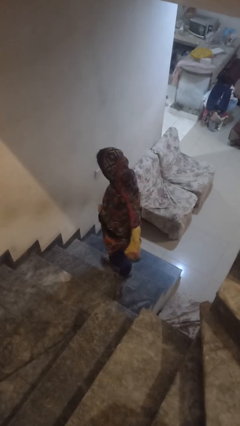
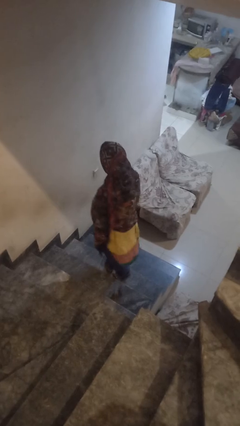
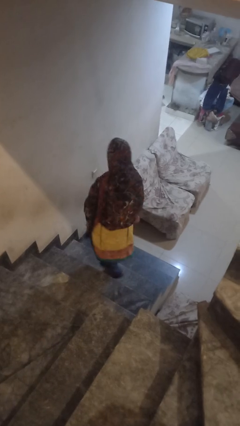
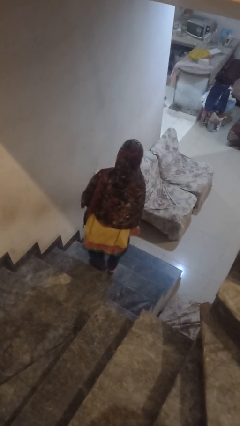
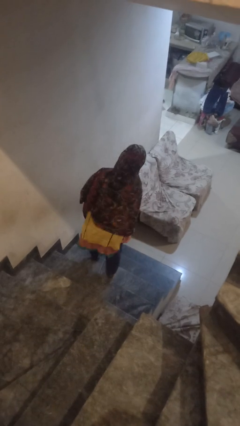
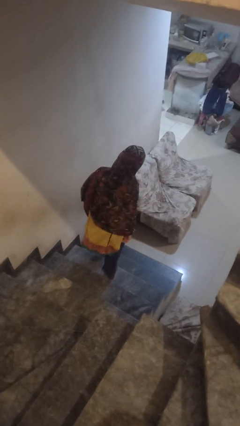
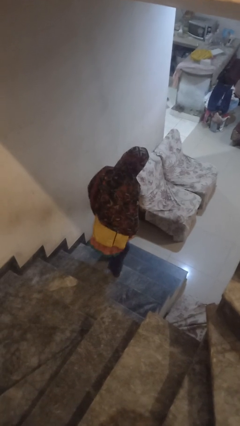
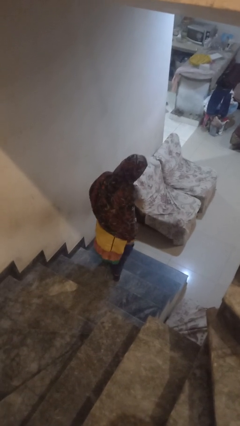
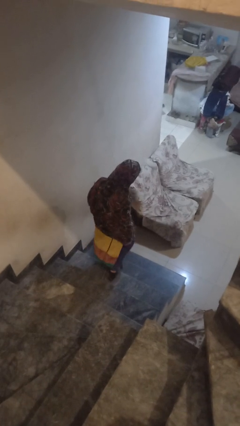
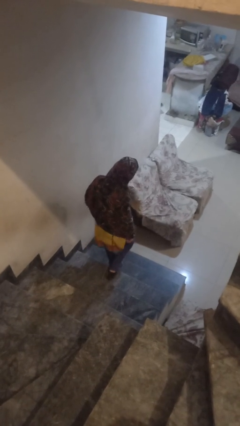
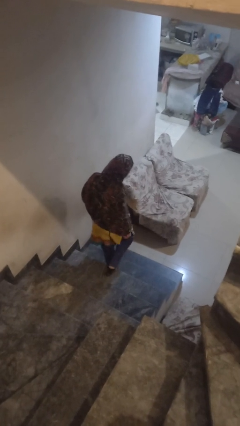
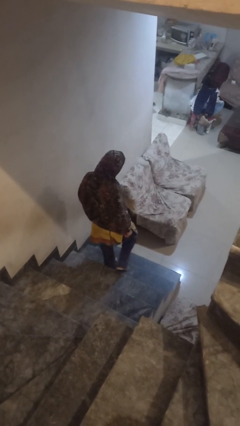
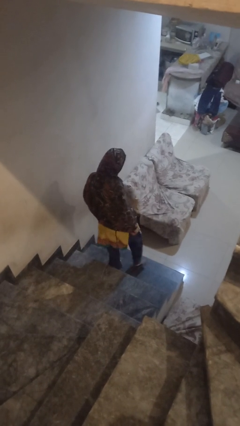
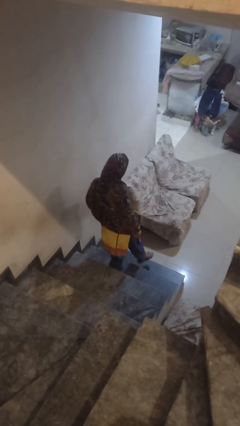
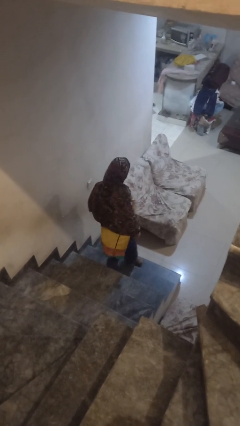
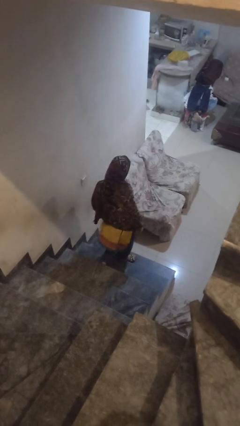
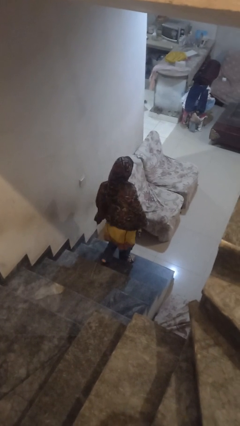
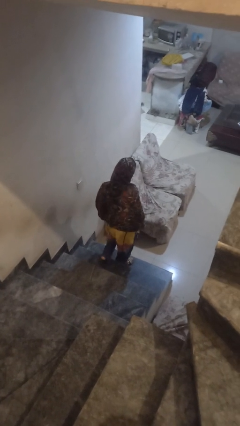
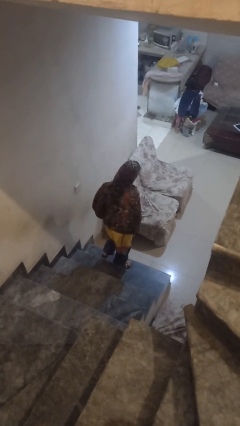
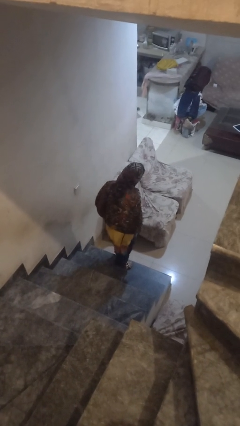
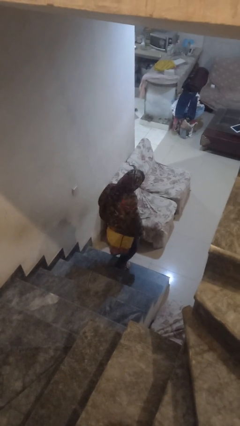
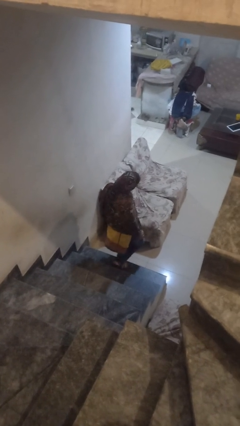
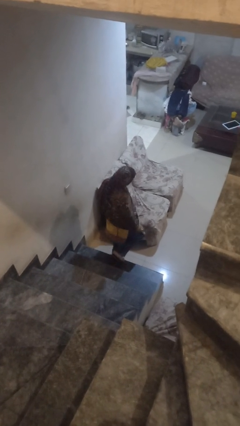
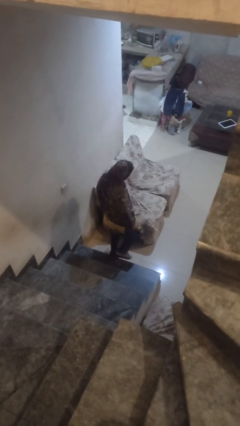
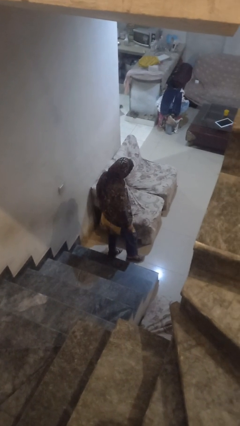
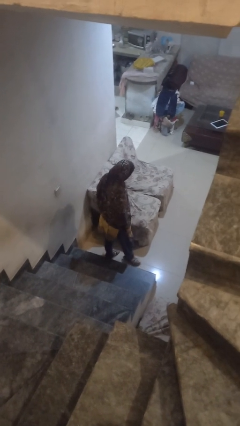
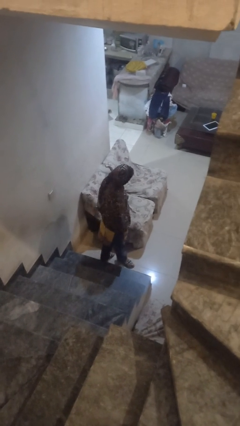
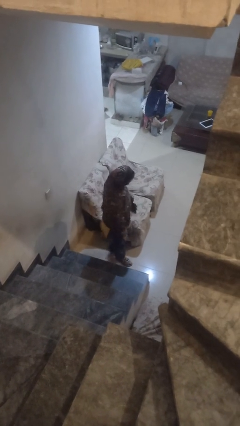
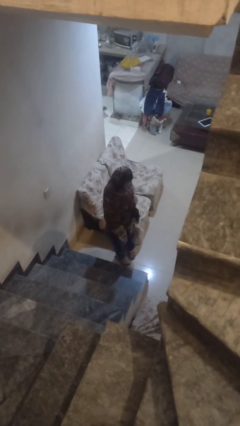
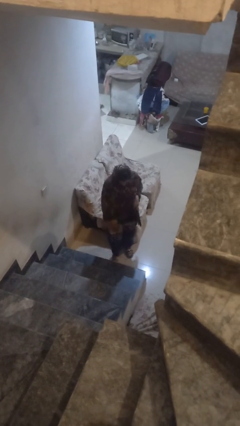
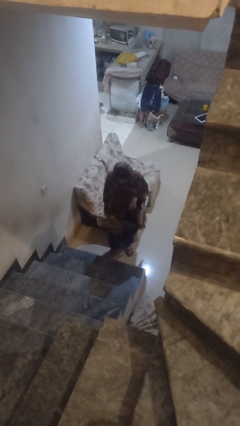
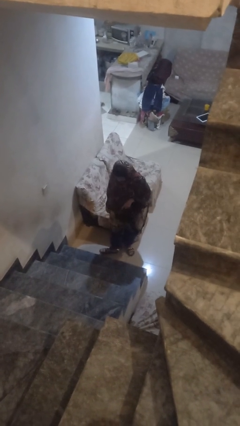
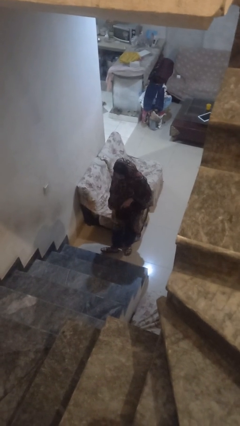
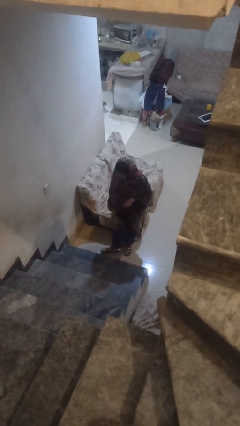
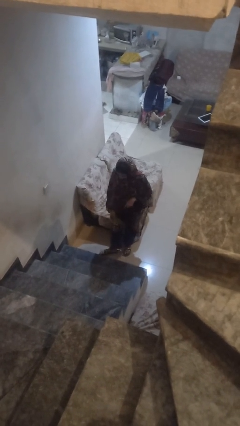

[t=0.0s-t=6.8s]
person climbs down stairs

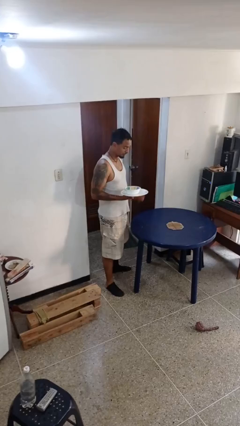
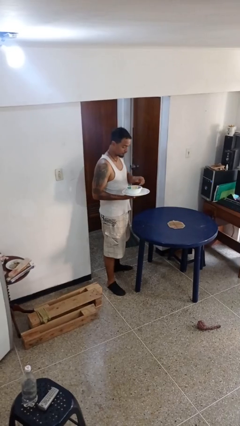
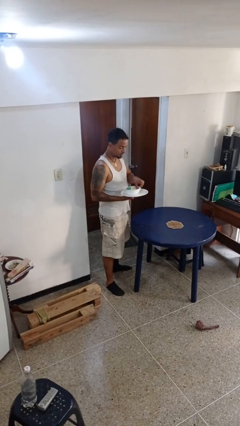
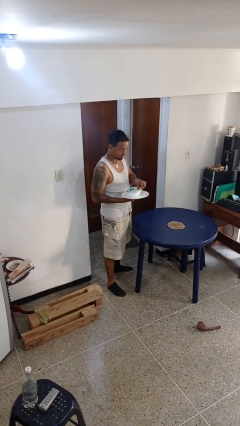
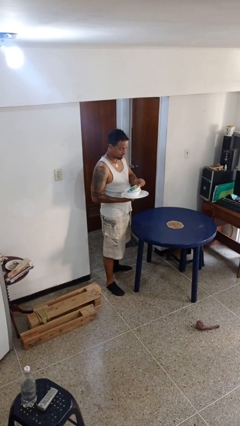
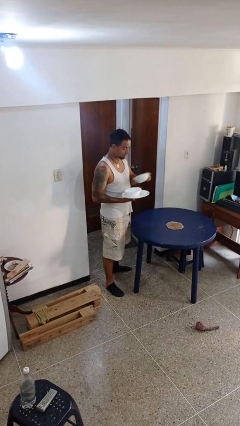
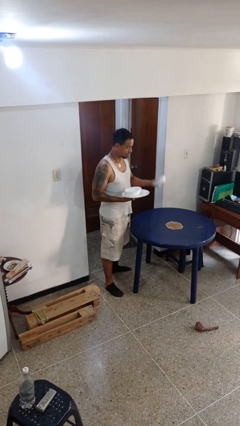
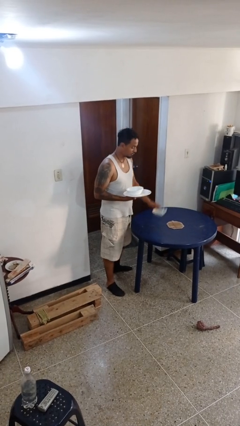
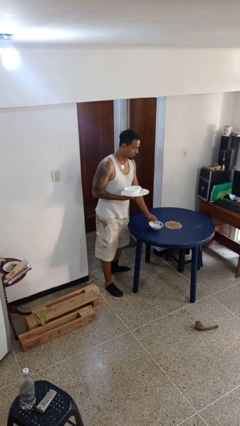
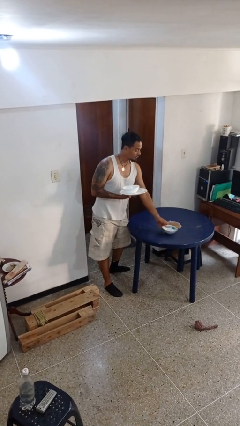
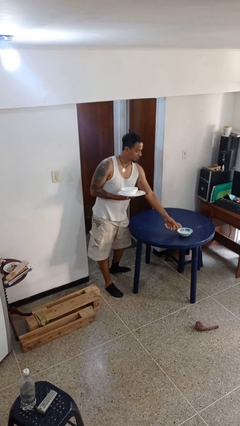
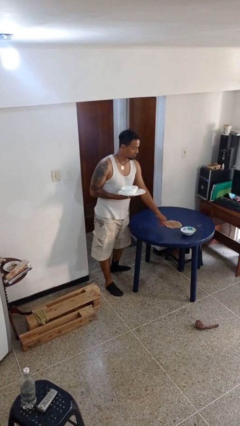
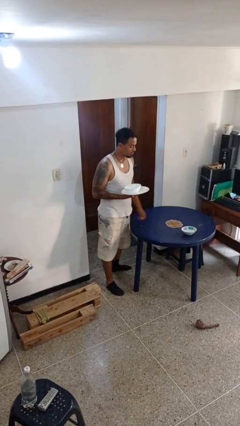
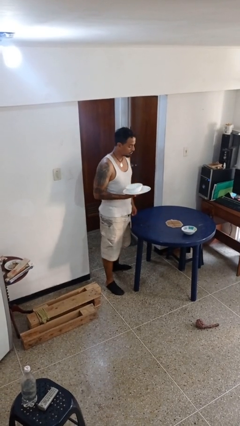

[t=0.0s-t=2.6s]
person sets table

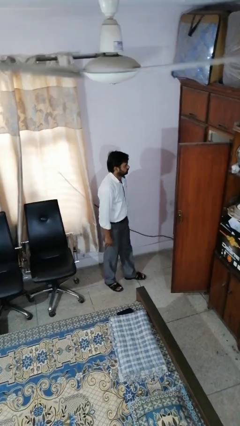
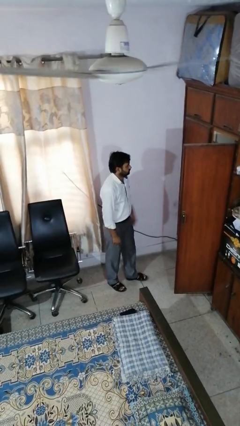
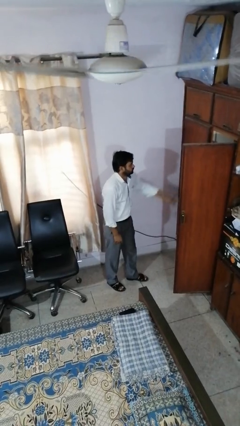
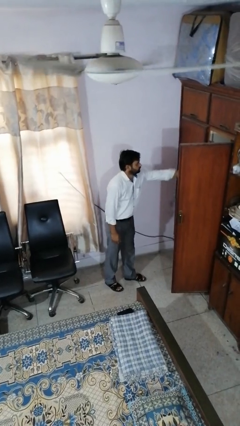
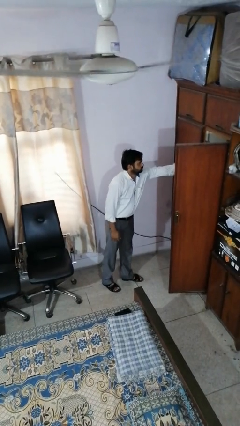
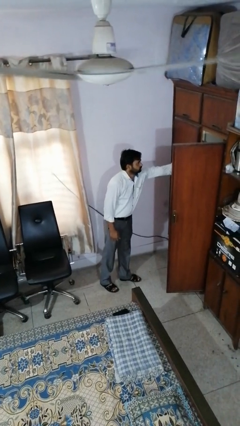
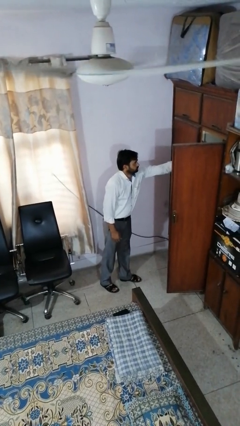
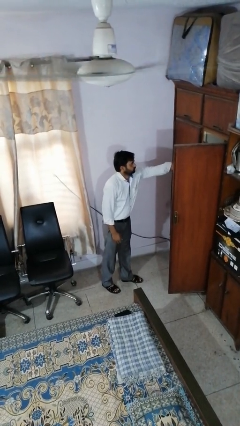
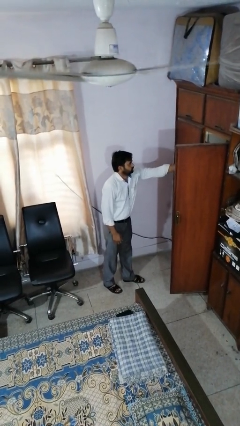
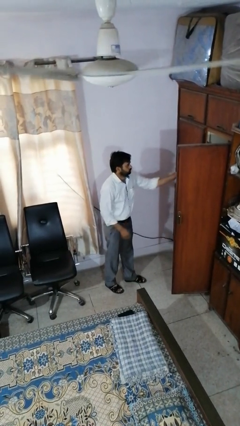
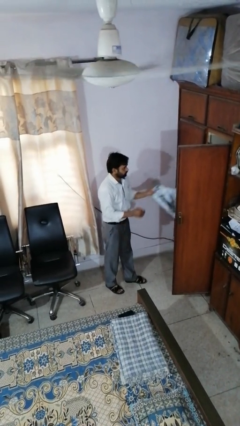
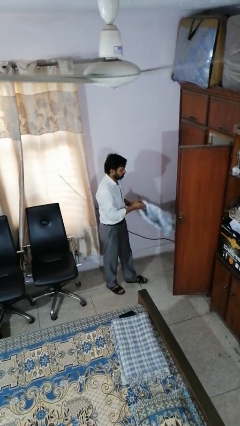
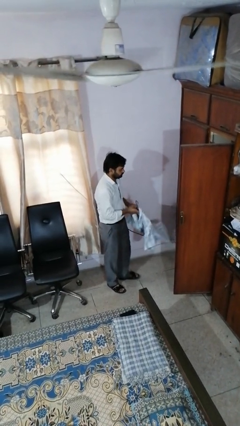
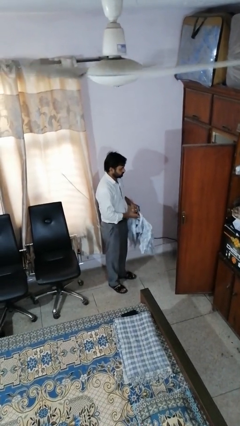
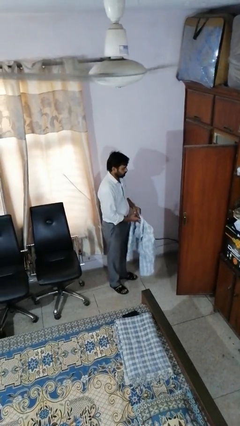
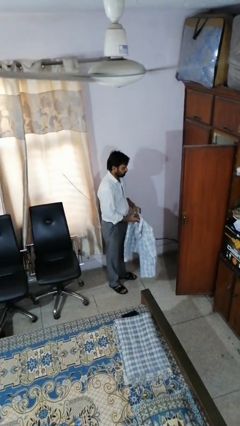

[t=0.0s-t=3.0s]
person takes clothes from closet

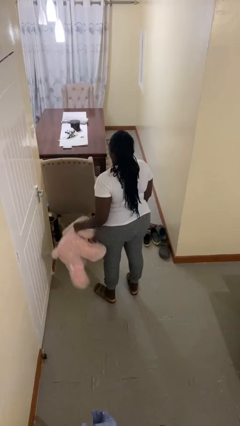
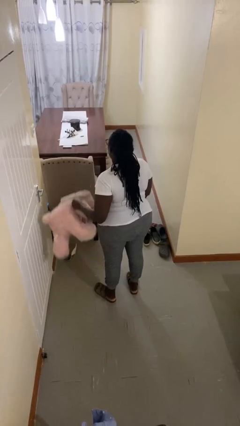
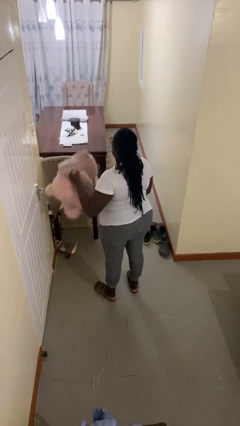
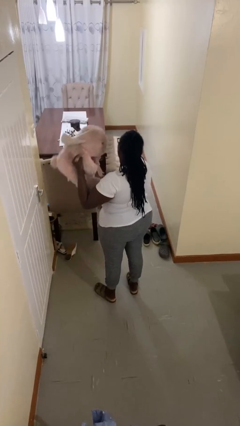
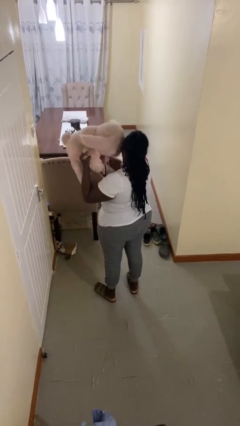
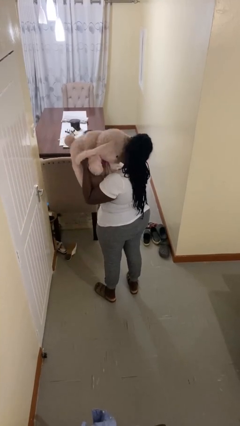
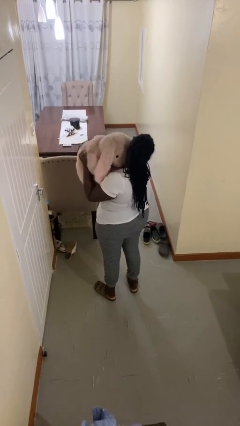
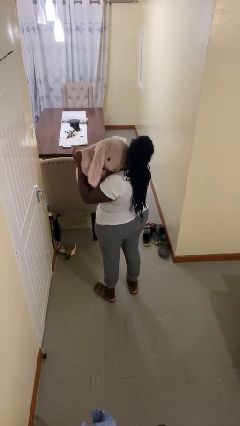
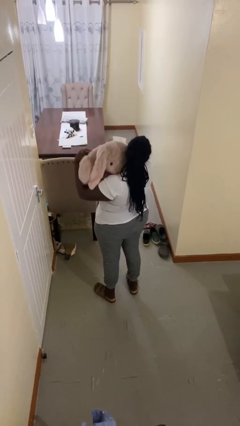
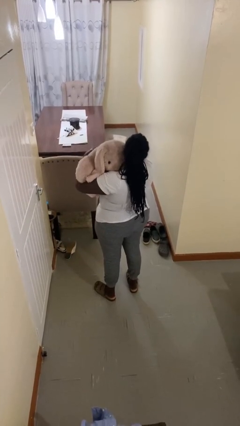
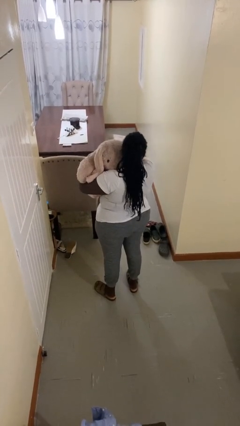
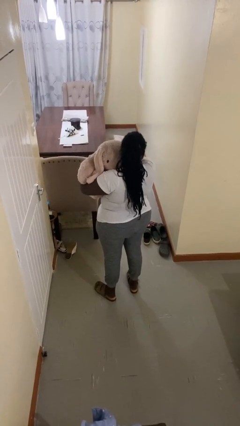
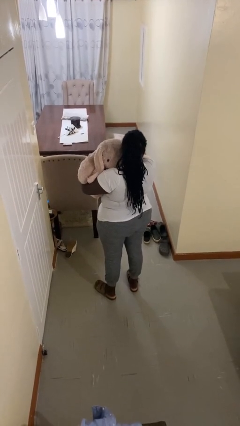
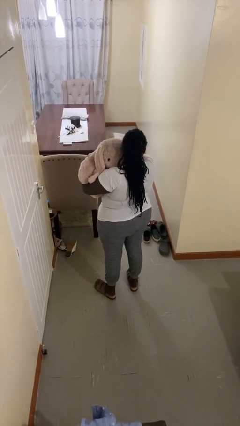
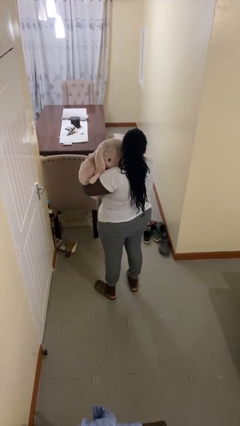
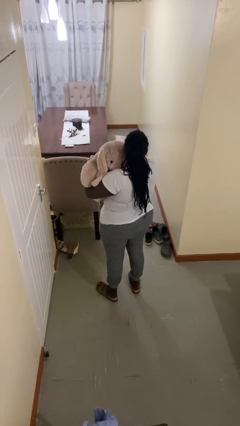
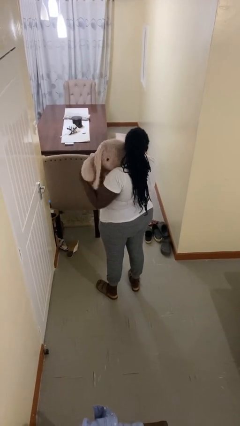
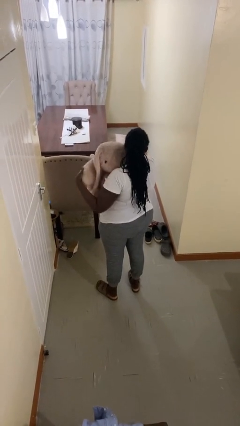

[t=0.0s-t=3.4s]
person hugs stuffed animal

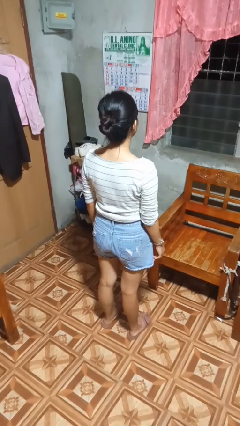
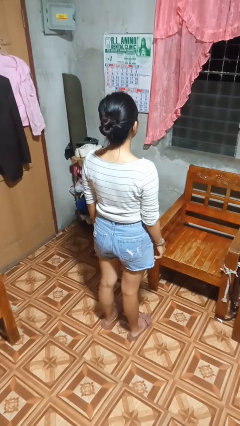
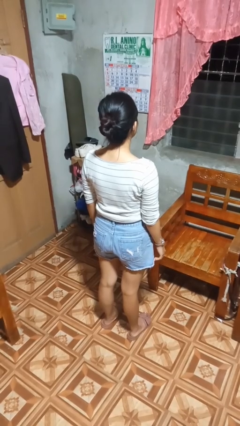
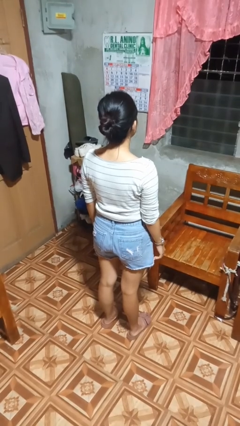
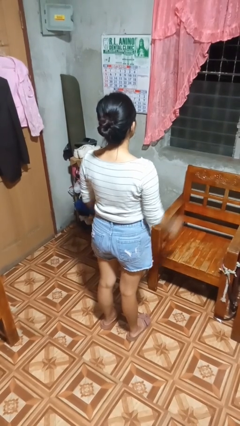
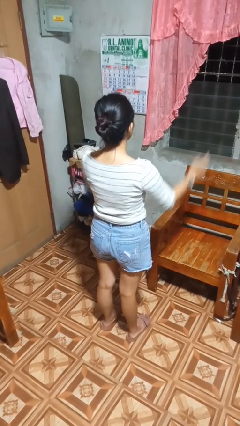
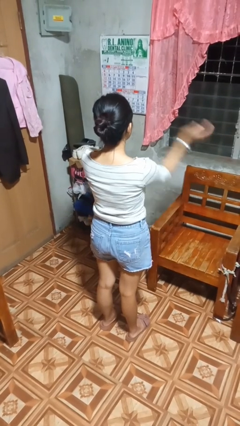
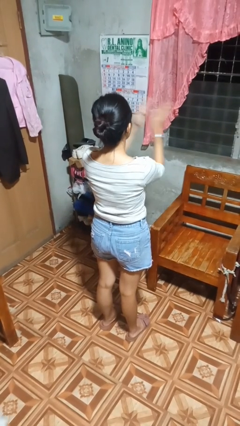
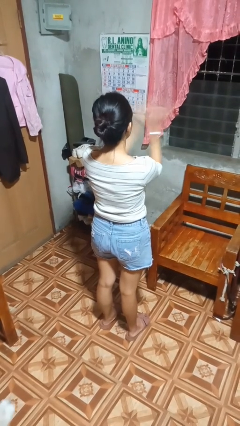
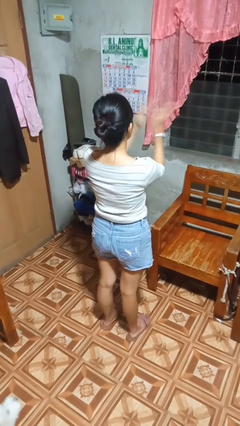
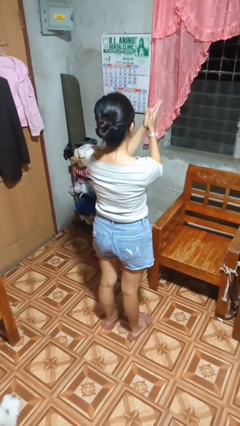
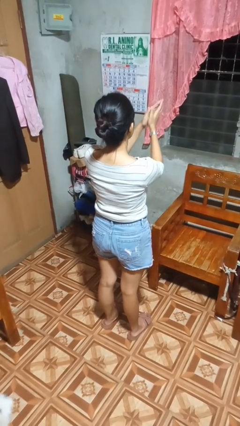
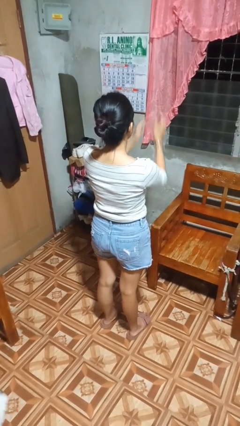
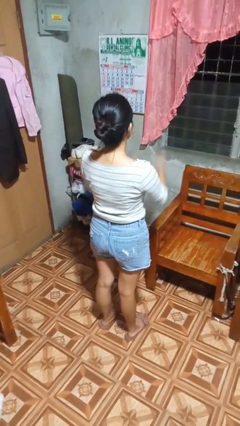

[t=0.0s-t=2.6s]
person claps hands
